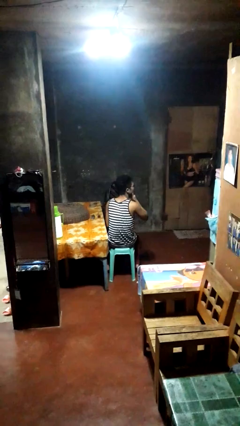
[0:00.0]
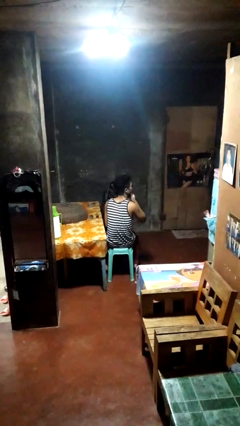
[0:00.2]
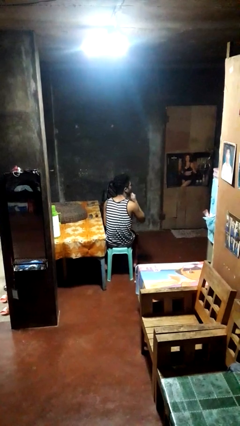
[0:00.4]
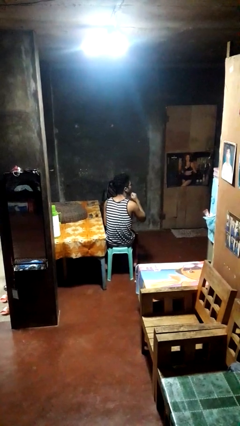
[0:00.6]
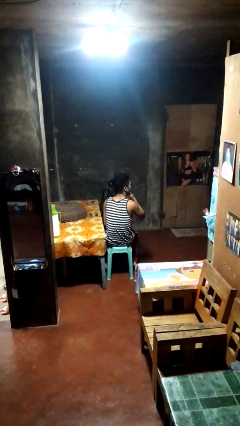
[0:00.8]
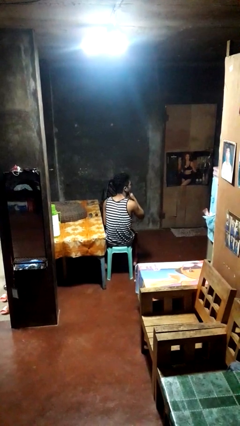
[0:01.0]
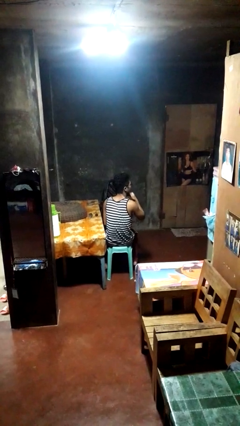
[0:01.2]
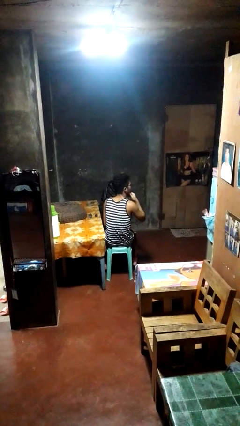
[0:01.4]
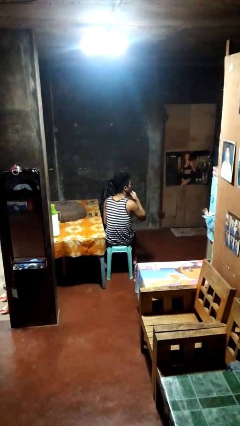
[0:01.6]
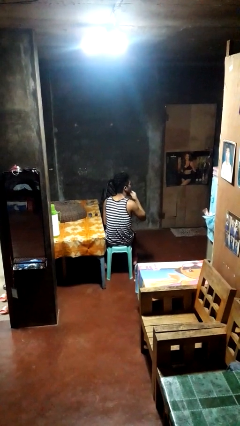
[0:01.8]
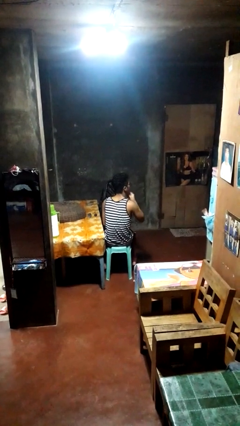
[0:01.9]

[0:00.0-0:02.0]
person strokes chin

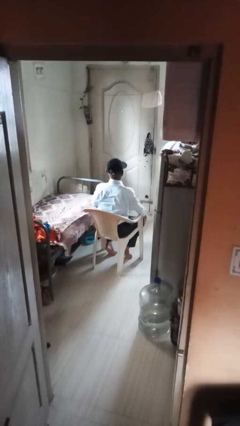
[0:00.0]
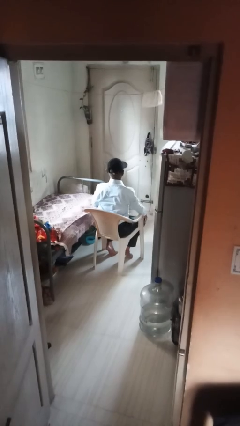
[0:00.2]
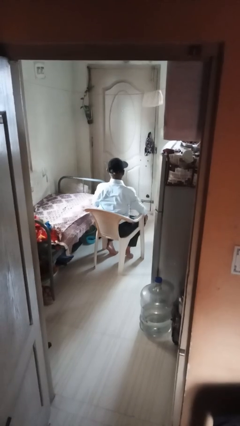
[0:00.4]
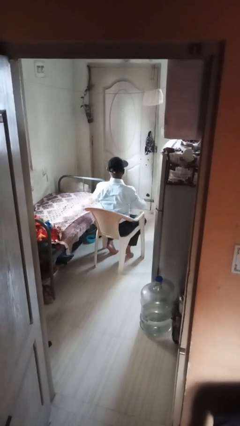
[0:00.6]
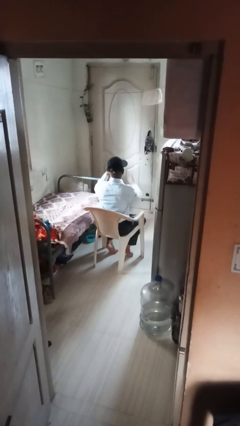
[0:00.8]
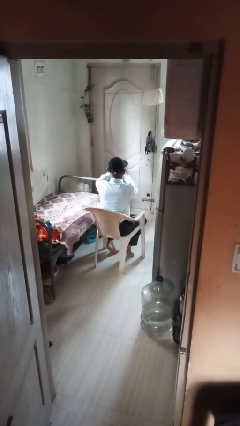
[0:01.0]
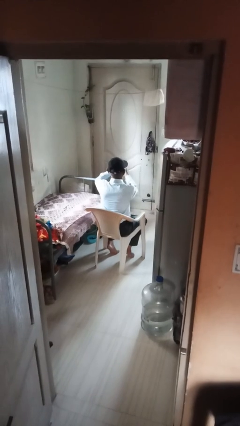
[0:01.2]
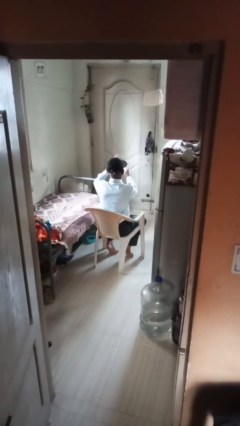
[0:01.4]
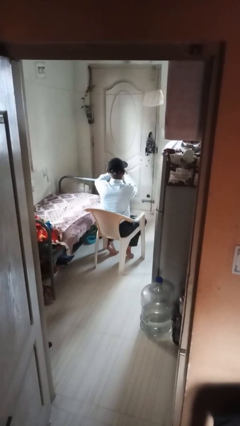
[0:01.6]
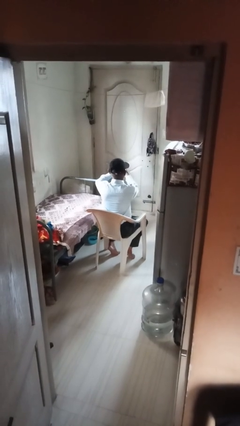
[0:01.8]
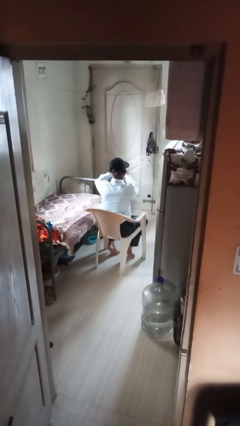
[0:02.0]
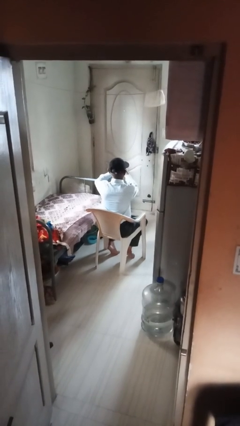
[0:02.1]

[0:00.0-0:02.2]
person claps hands

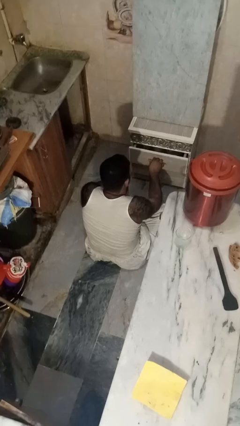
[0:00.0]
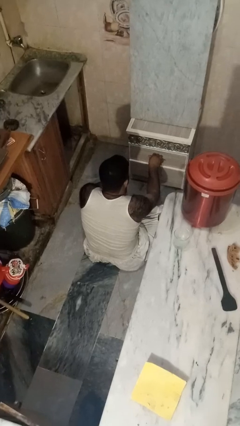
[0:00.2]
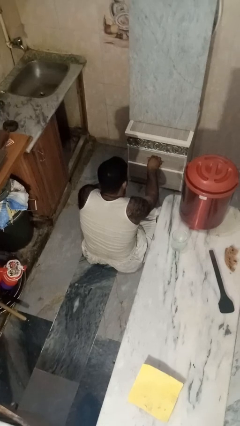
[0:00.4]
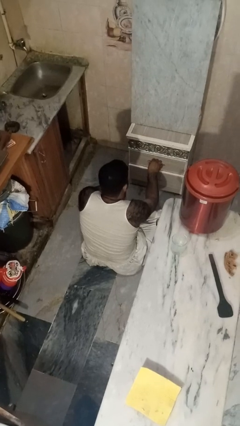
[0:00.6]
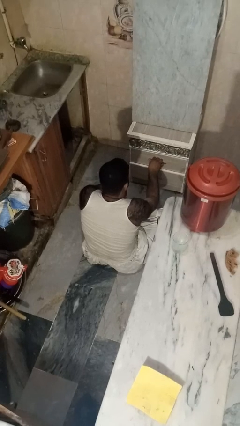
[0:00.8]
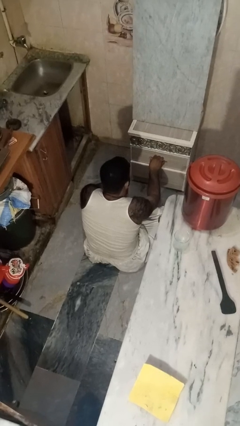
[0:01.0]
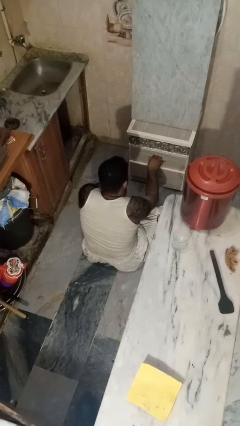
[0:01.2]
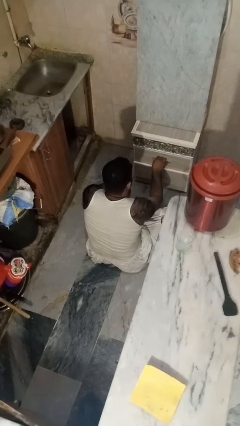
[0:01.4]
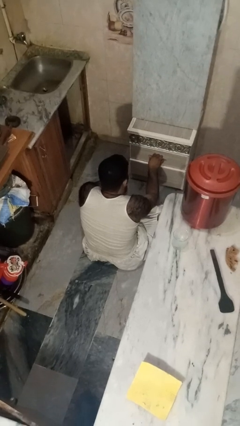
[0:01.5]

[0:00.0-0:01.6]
person closes kitchen drawer

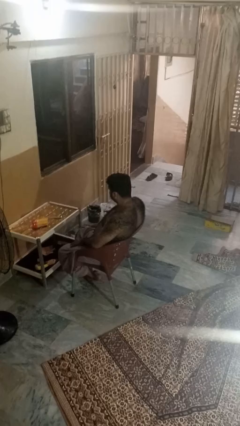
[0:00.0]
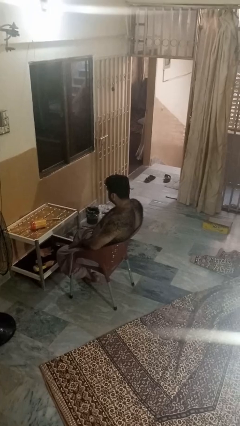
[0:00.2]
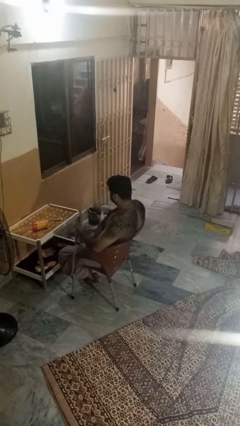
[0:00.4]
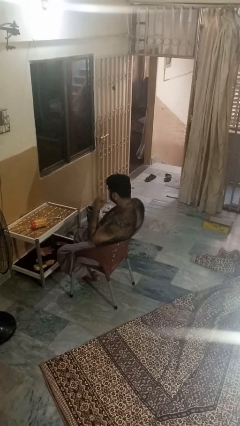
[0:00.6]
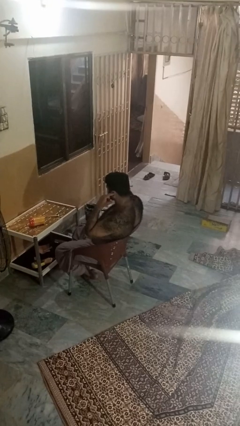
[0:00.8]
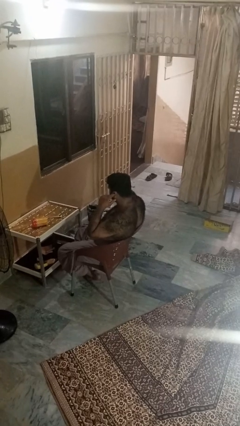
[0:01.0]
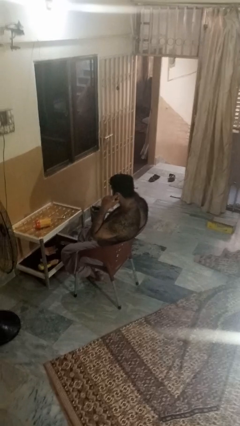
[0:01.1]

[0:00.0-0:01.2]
person puts fingers in ear

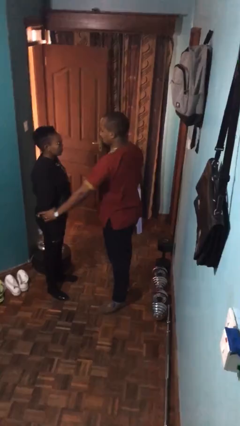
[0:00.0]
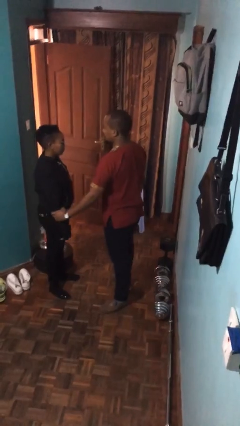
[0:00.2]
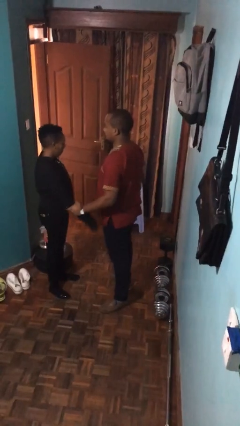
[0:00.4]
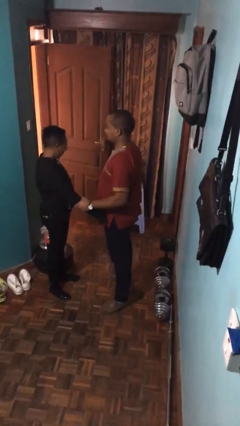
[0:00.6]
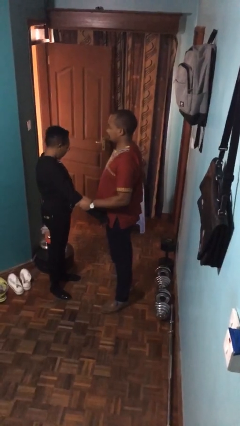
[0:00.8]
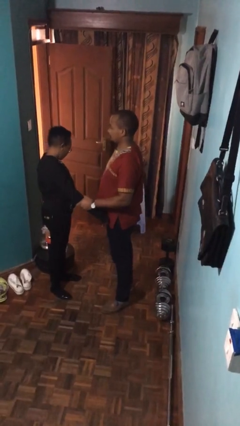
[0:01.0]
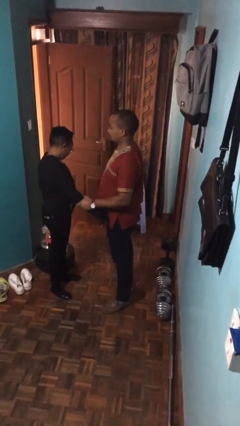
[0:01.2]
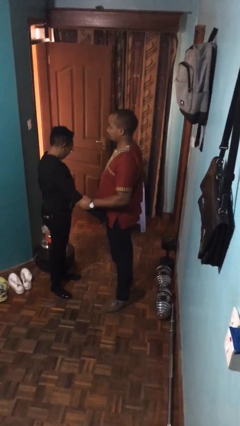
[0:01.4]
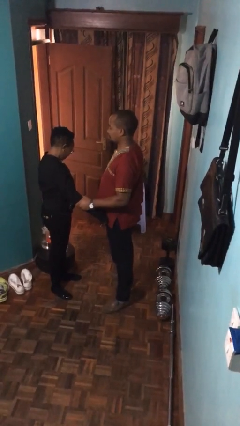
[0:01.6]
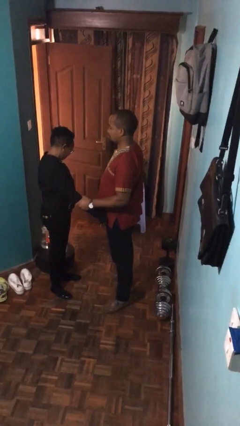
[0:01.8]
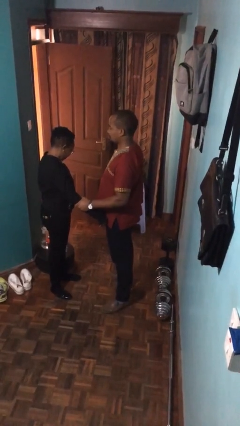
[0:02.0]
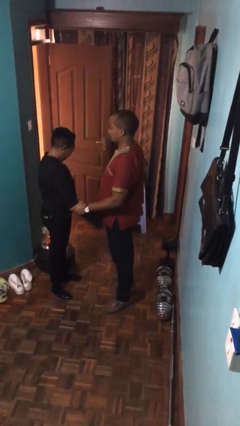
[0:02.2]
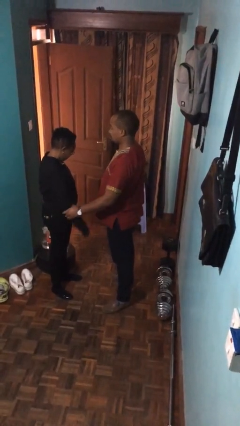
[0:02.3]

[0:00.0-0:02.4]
person grabs person by forearm

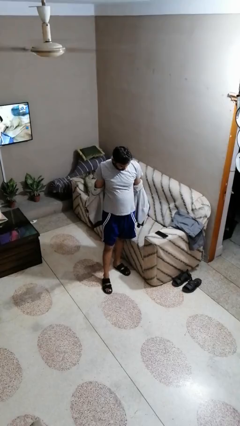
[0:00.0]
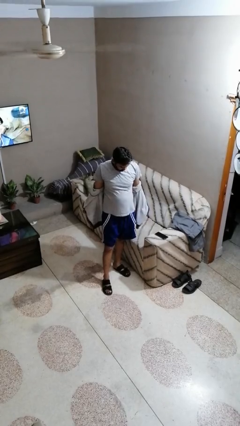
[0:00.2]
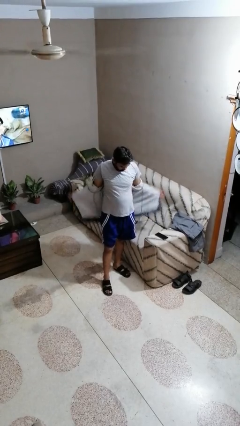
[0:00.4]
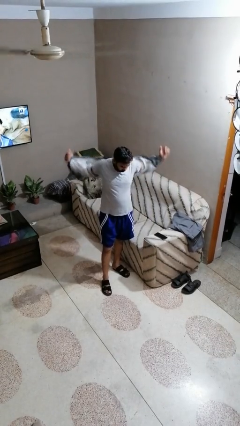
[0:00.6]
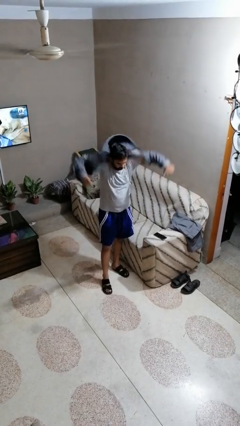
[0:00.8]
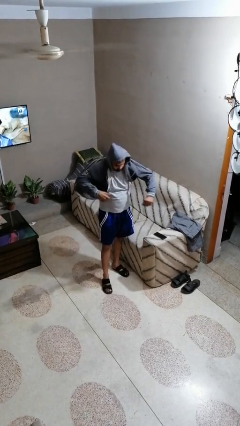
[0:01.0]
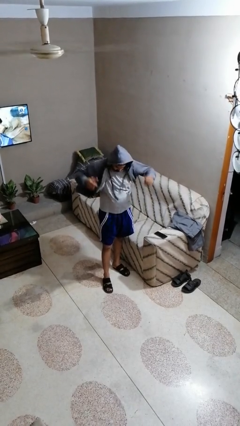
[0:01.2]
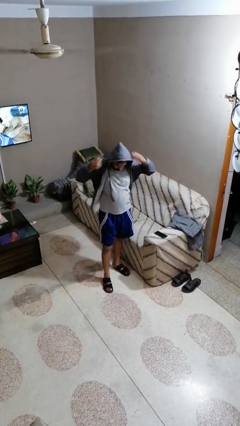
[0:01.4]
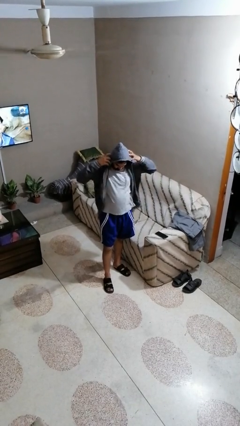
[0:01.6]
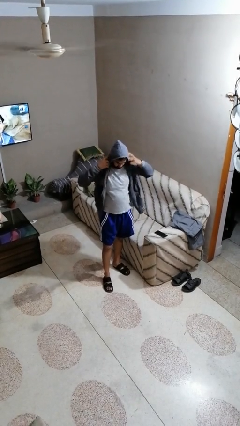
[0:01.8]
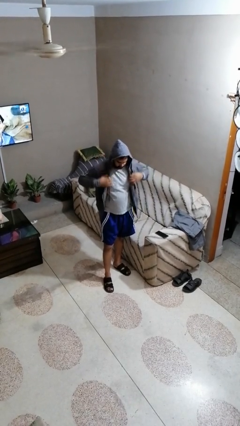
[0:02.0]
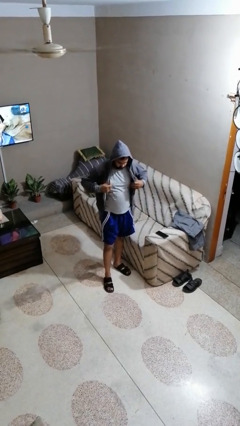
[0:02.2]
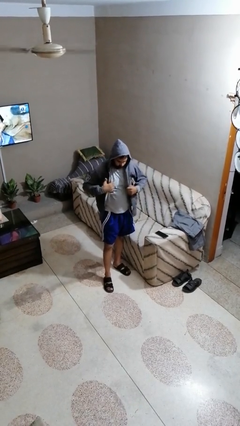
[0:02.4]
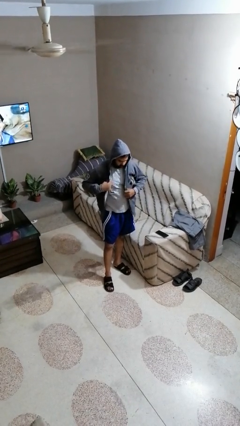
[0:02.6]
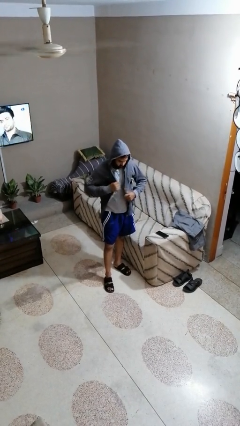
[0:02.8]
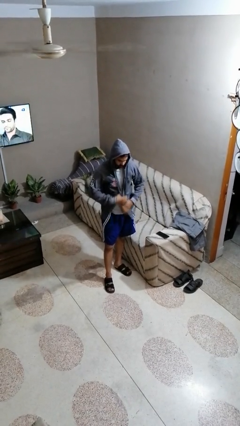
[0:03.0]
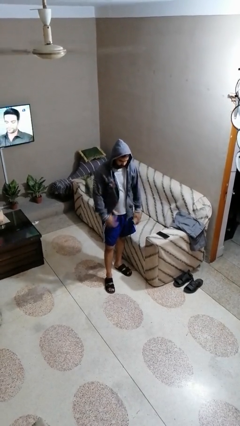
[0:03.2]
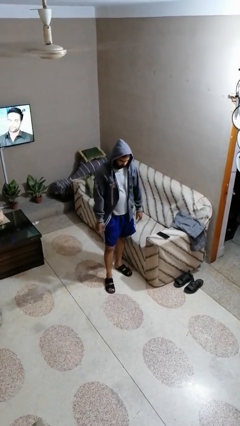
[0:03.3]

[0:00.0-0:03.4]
person puts on hoodie

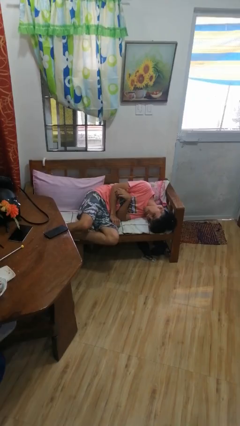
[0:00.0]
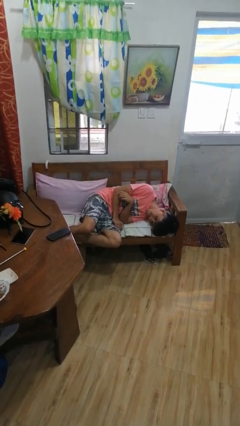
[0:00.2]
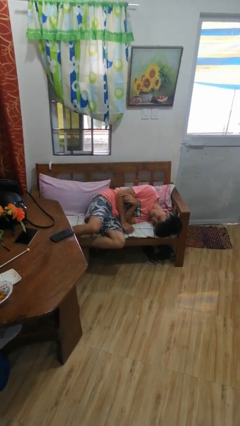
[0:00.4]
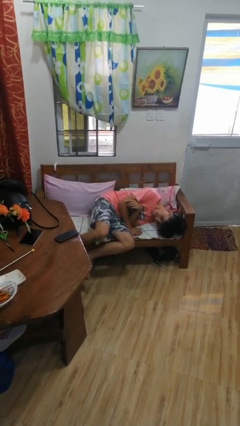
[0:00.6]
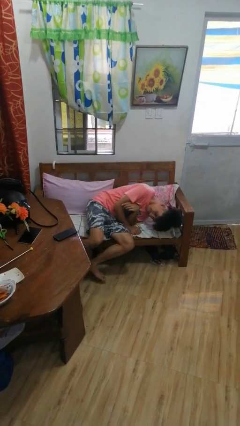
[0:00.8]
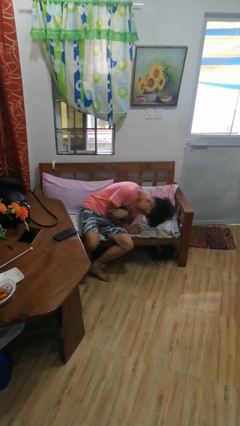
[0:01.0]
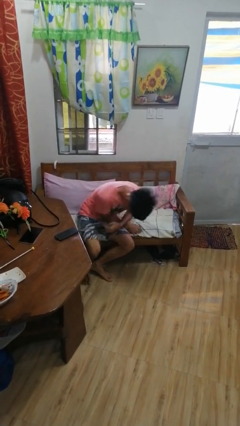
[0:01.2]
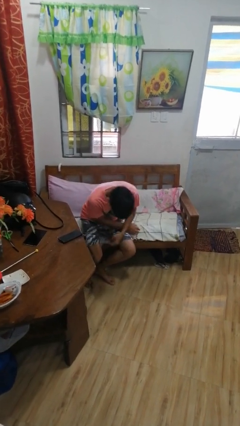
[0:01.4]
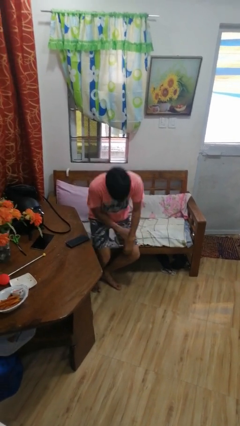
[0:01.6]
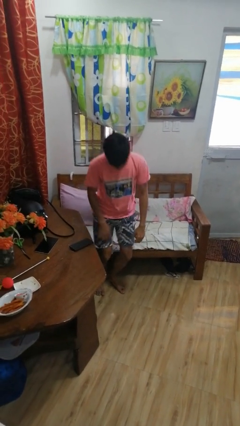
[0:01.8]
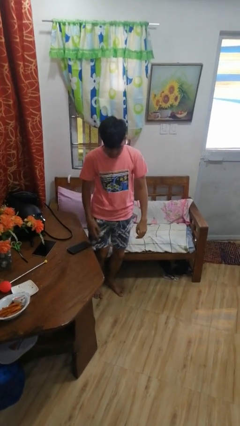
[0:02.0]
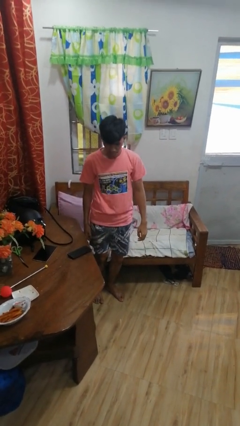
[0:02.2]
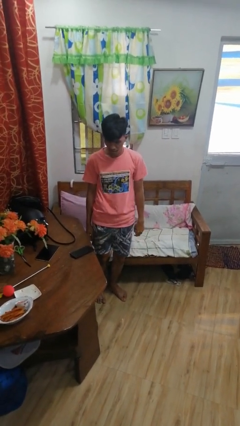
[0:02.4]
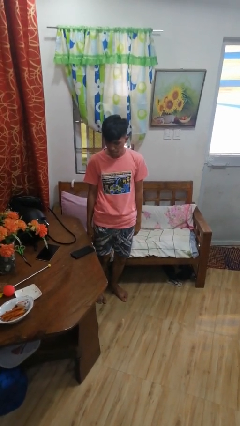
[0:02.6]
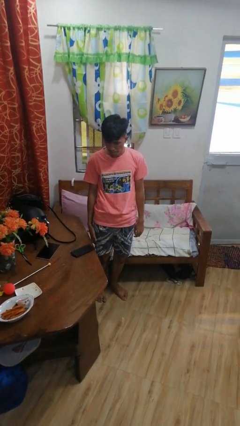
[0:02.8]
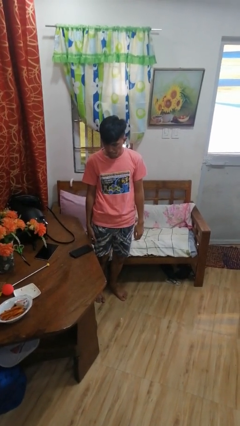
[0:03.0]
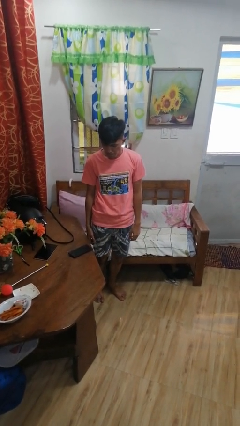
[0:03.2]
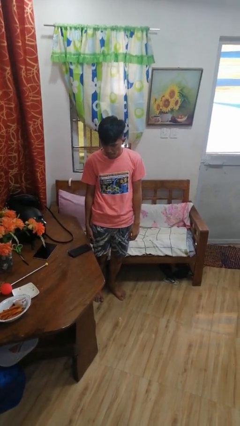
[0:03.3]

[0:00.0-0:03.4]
person stands up

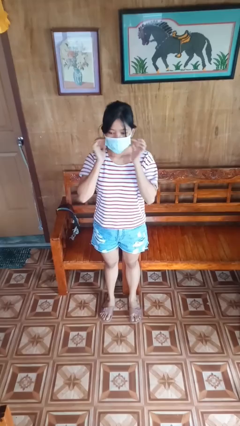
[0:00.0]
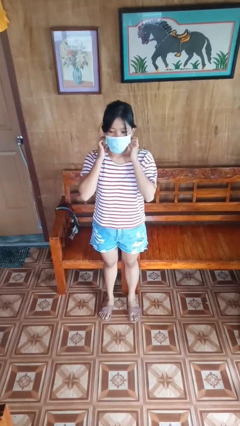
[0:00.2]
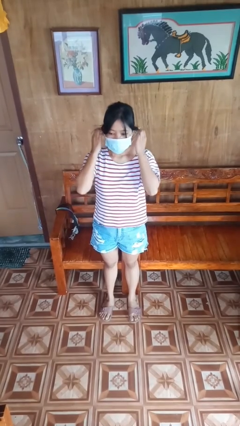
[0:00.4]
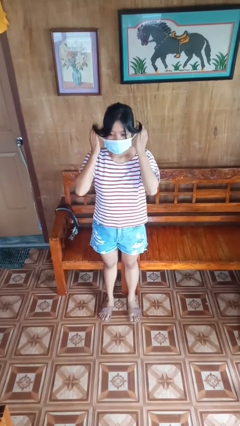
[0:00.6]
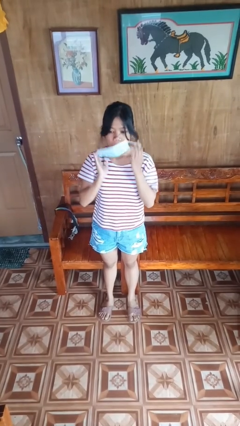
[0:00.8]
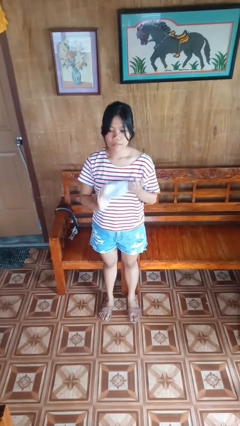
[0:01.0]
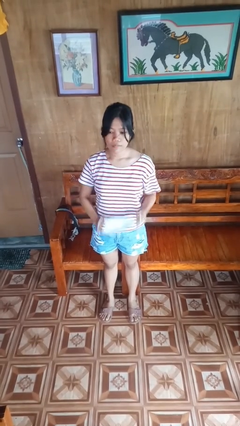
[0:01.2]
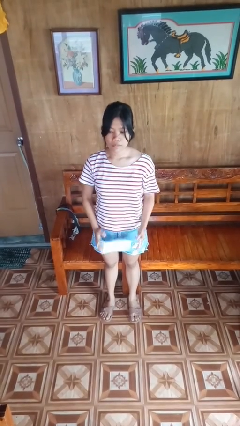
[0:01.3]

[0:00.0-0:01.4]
person takes off facemask
